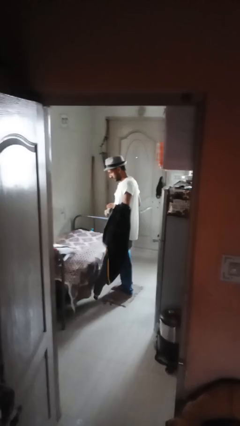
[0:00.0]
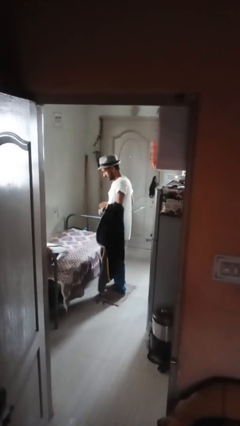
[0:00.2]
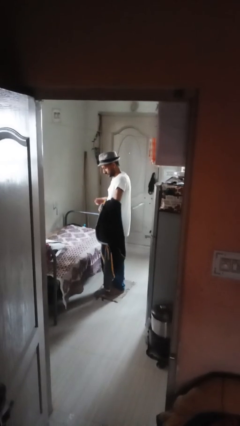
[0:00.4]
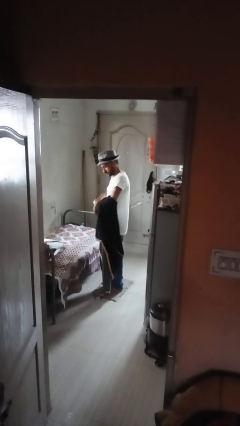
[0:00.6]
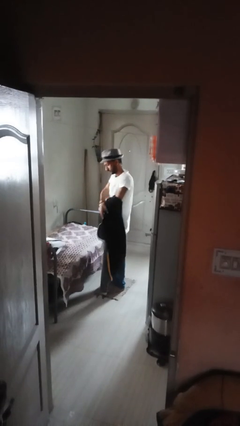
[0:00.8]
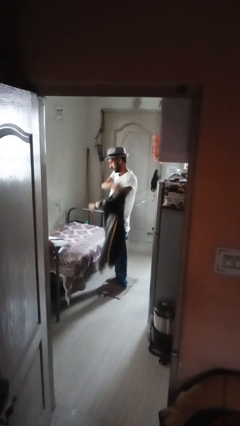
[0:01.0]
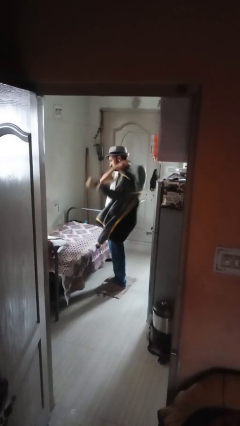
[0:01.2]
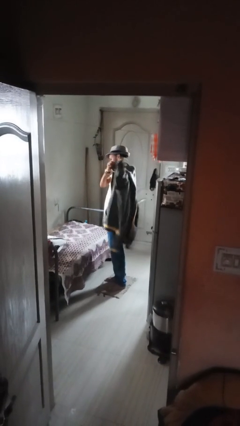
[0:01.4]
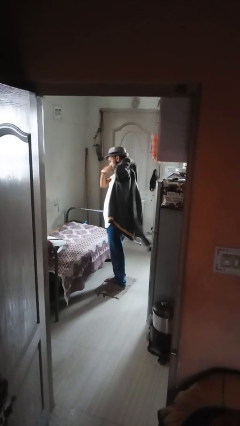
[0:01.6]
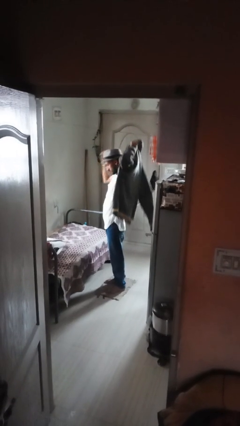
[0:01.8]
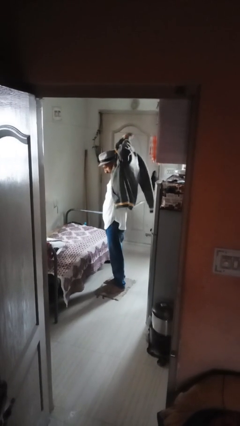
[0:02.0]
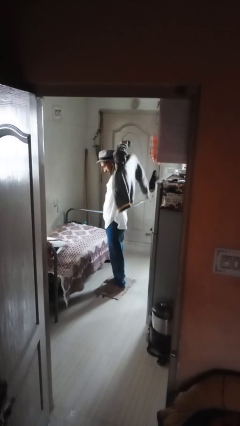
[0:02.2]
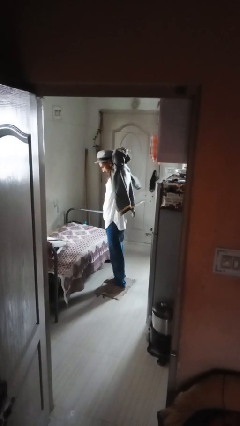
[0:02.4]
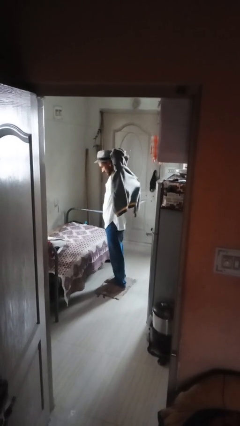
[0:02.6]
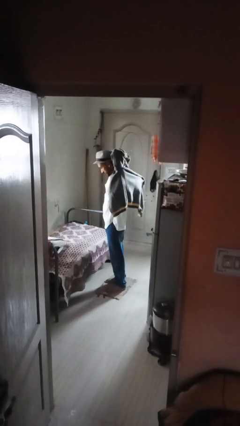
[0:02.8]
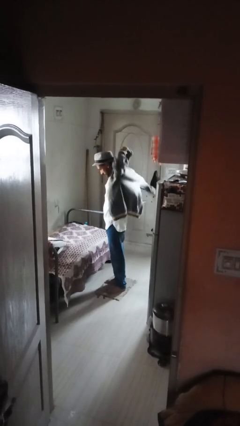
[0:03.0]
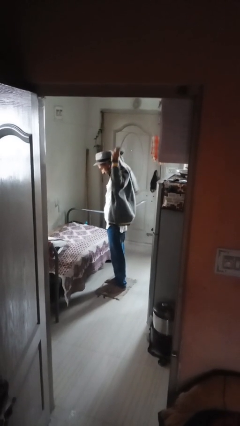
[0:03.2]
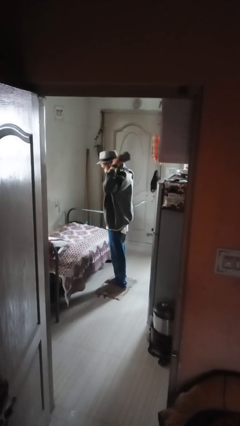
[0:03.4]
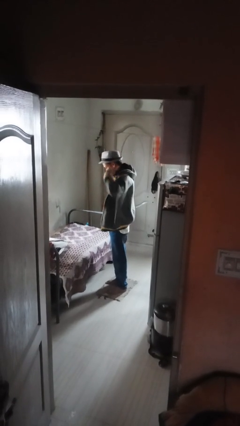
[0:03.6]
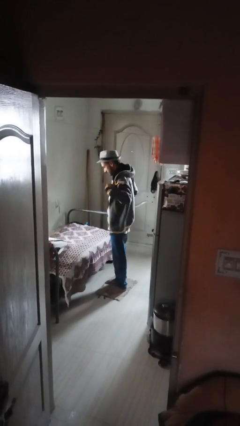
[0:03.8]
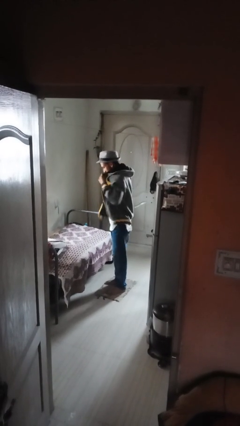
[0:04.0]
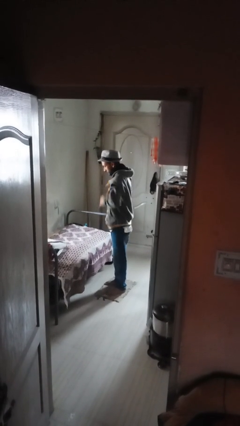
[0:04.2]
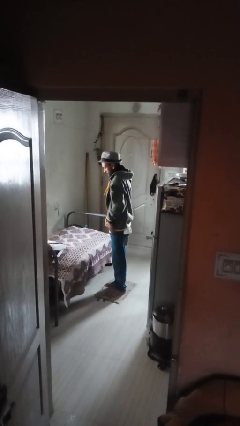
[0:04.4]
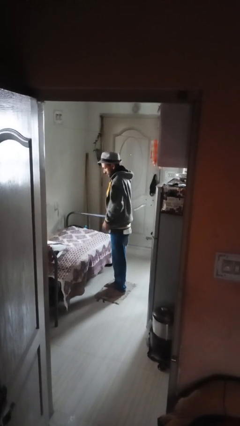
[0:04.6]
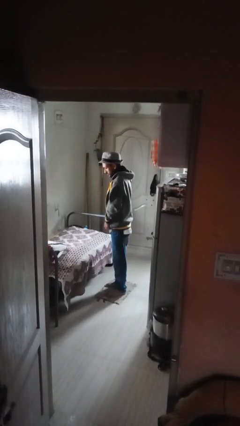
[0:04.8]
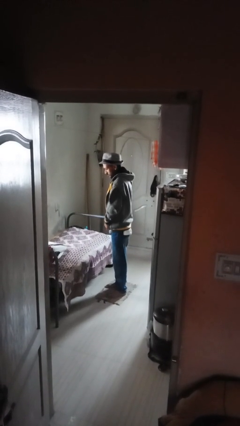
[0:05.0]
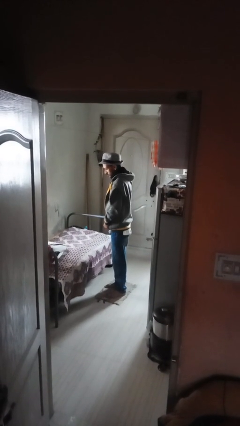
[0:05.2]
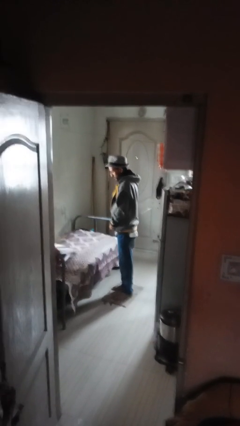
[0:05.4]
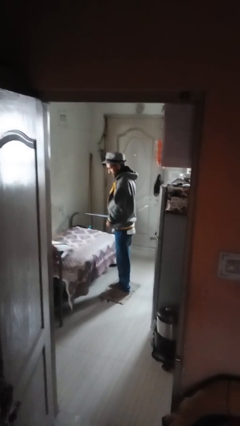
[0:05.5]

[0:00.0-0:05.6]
person puts on jacket

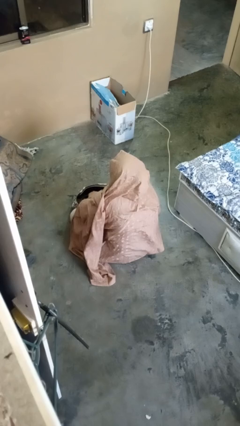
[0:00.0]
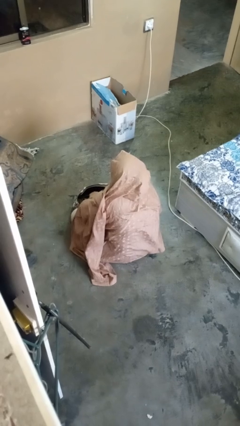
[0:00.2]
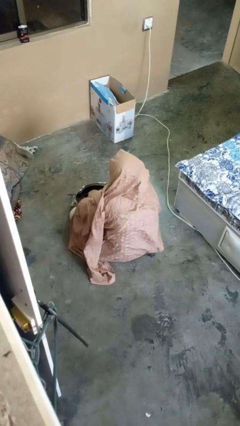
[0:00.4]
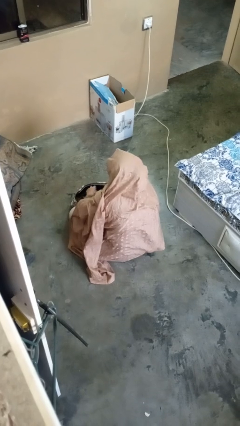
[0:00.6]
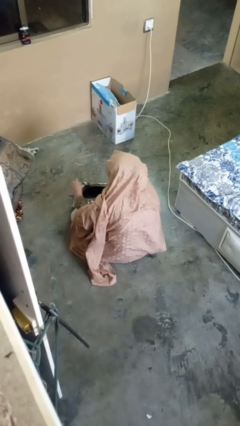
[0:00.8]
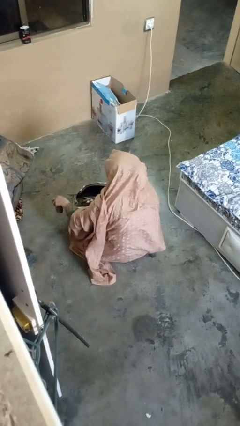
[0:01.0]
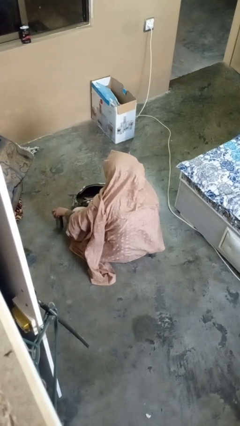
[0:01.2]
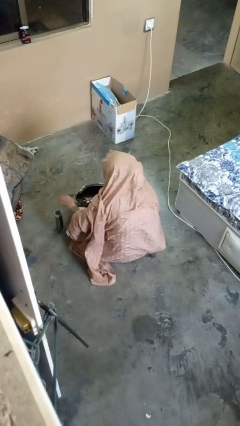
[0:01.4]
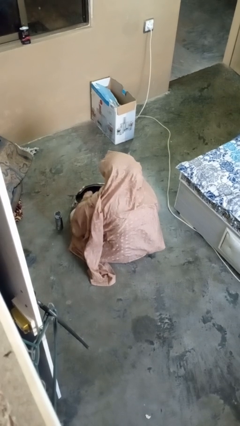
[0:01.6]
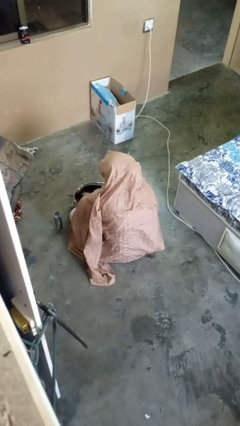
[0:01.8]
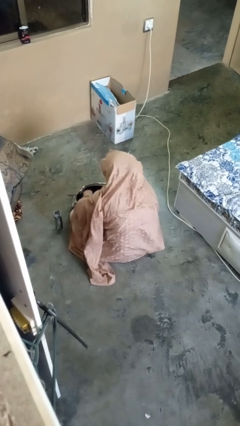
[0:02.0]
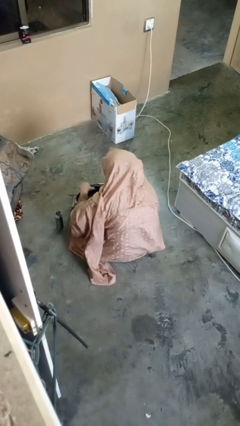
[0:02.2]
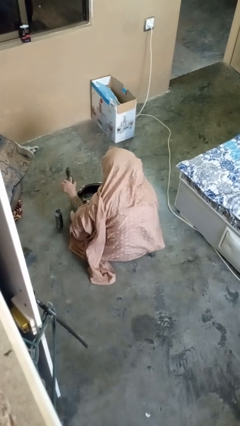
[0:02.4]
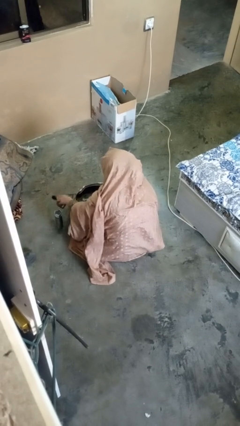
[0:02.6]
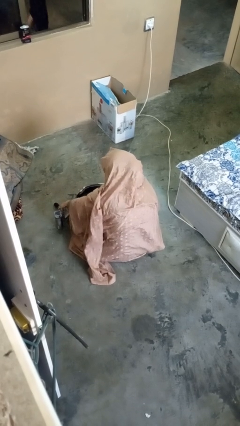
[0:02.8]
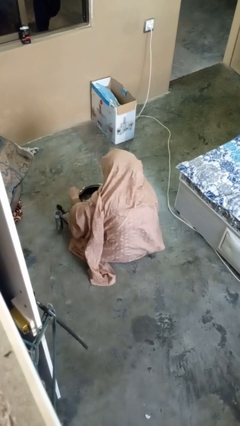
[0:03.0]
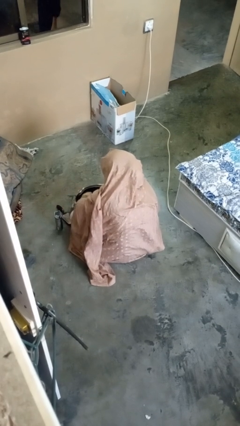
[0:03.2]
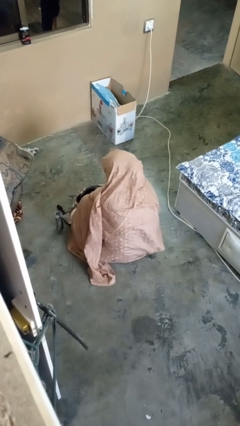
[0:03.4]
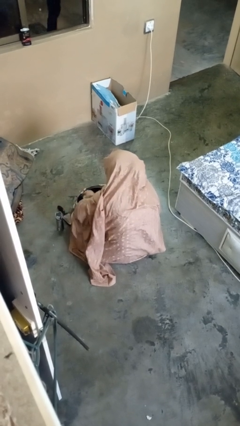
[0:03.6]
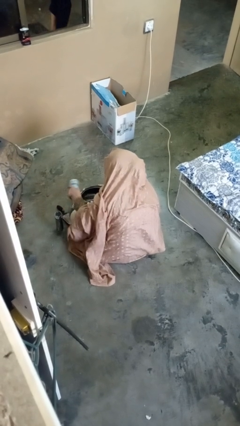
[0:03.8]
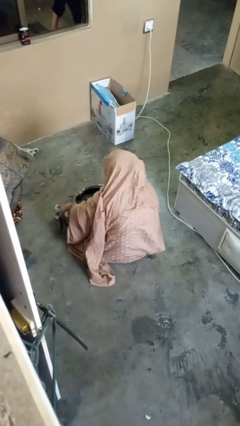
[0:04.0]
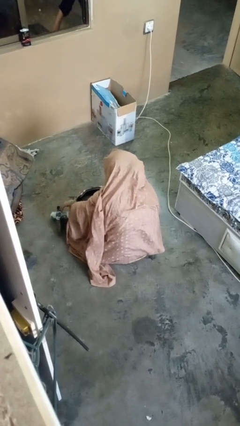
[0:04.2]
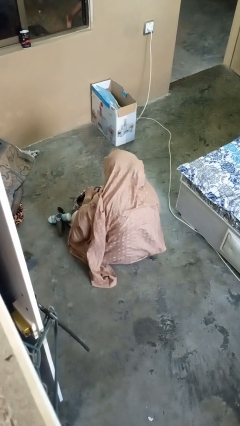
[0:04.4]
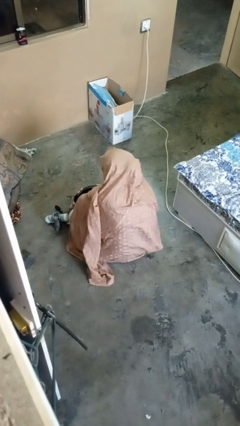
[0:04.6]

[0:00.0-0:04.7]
person takes object from purse

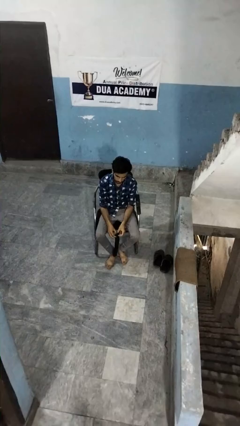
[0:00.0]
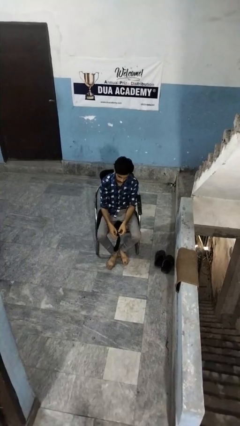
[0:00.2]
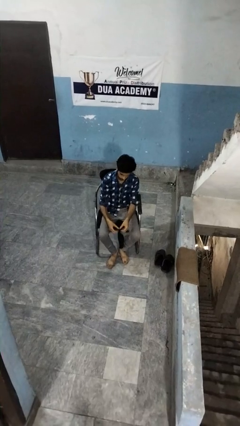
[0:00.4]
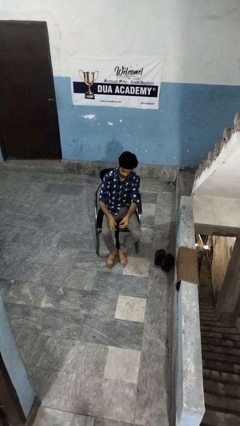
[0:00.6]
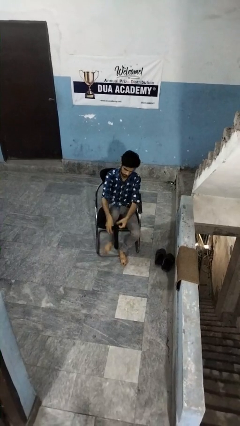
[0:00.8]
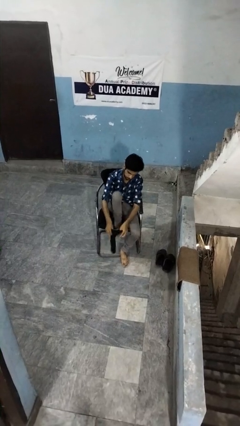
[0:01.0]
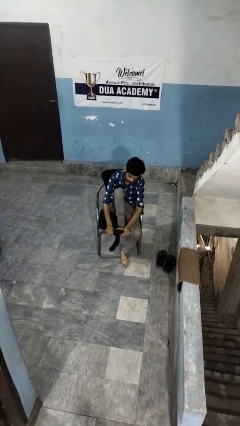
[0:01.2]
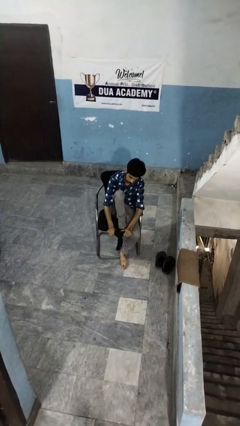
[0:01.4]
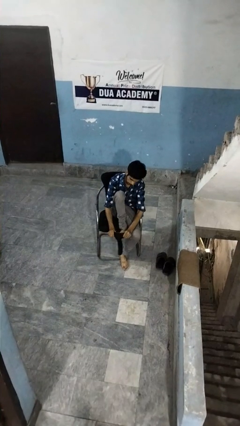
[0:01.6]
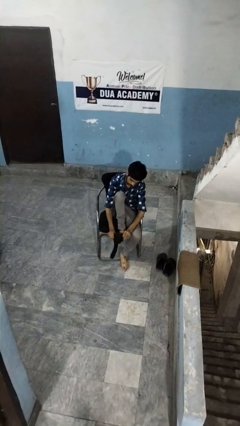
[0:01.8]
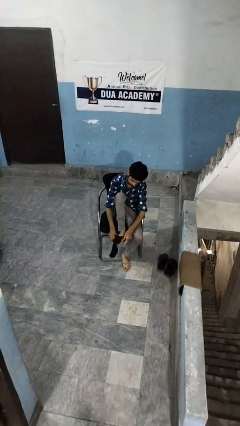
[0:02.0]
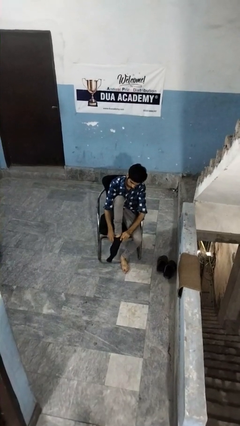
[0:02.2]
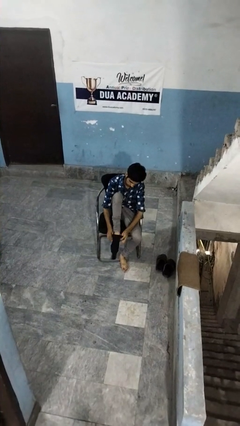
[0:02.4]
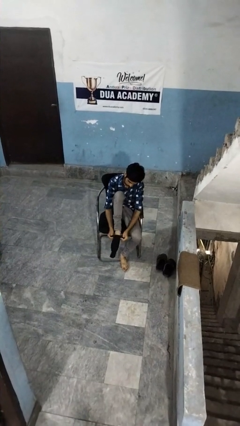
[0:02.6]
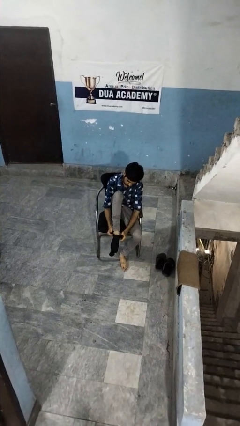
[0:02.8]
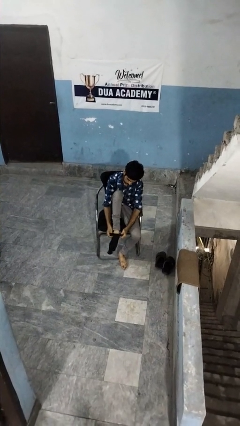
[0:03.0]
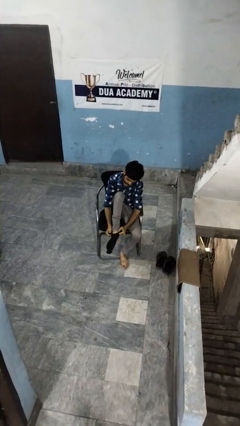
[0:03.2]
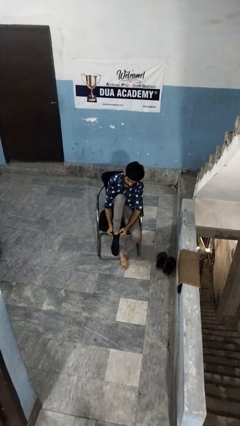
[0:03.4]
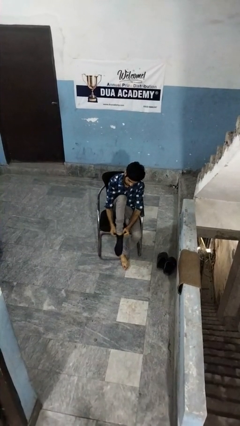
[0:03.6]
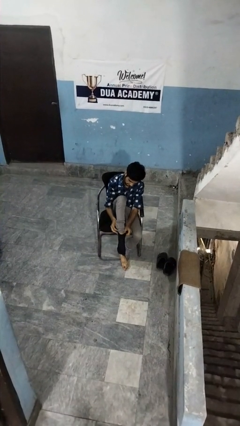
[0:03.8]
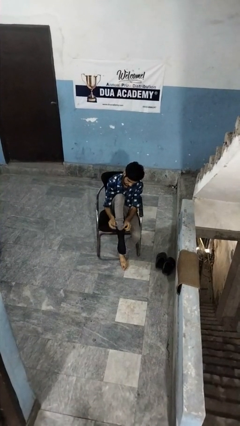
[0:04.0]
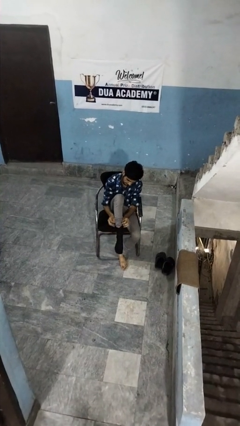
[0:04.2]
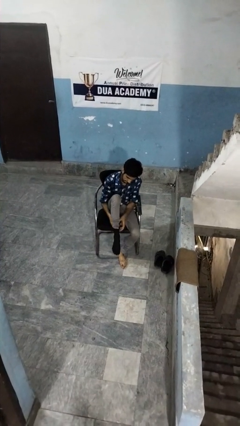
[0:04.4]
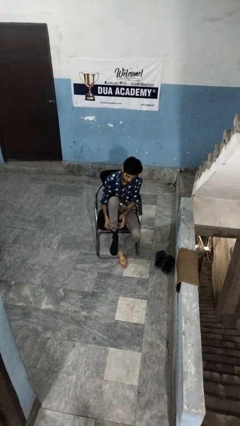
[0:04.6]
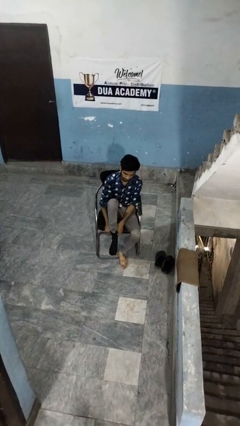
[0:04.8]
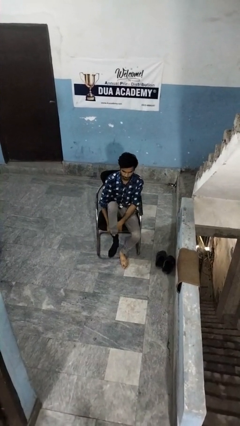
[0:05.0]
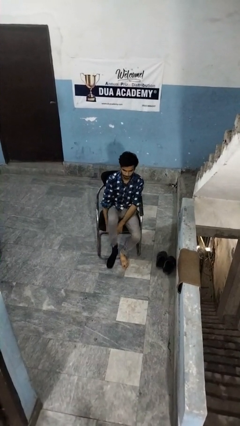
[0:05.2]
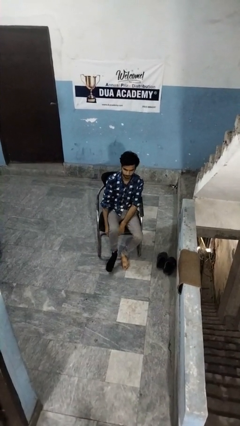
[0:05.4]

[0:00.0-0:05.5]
person puts on socks

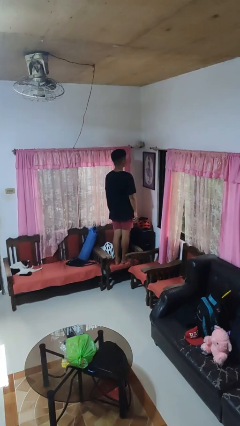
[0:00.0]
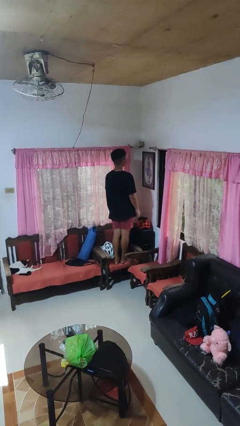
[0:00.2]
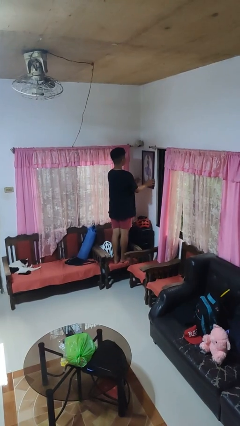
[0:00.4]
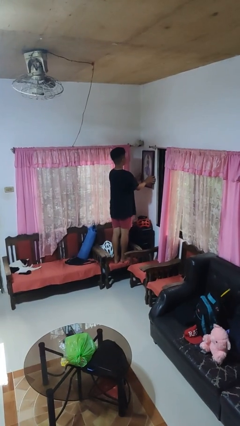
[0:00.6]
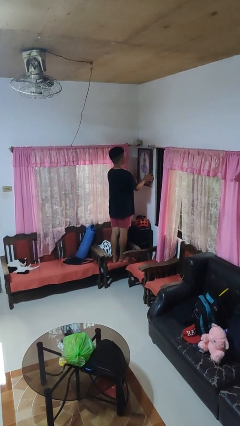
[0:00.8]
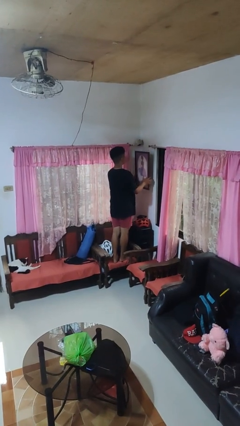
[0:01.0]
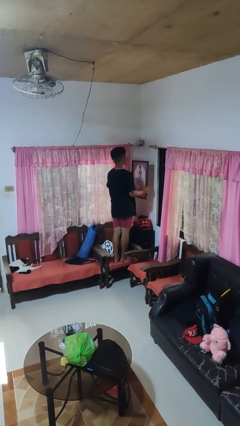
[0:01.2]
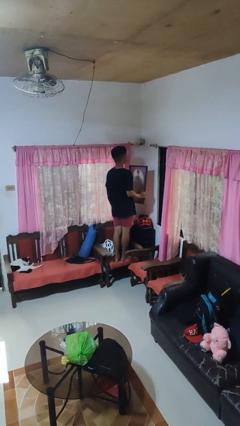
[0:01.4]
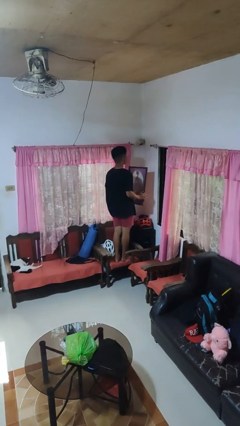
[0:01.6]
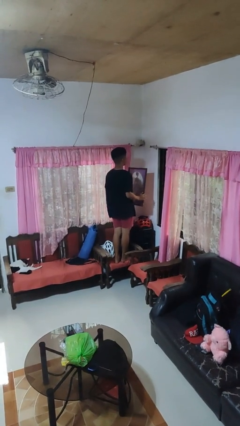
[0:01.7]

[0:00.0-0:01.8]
person takes down picture frame

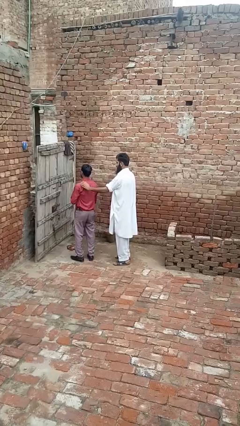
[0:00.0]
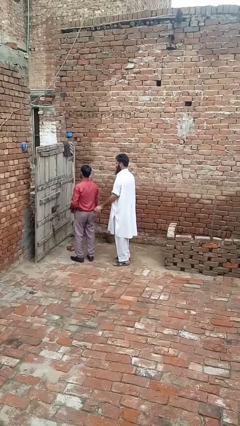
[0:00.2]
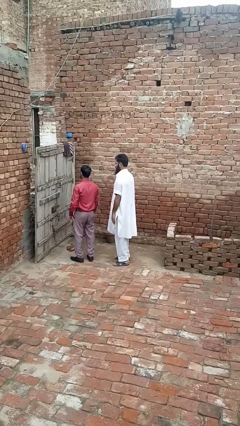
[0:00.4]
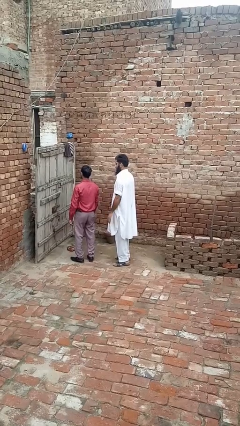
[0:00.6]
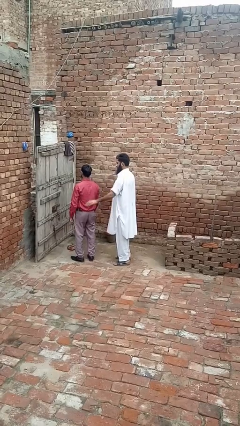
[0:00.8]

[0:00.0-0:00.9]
person touches back of person
